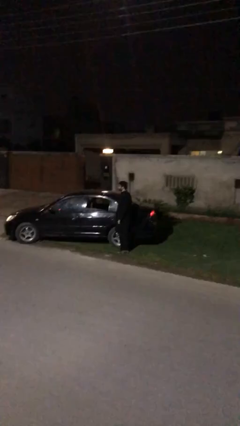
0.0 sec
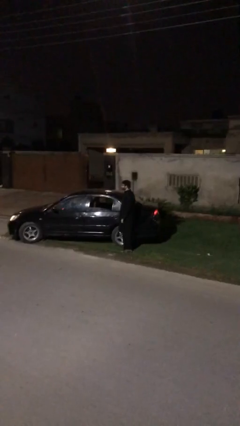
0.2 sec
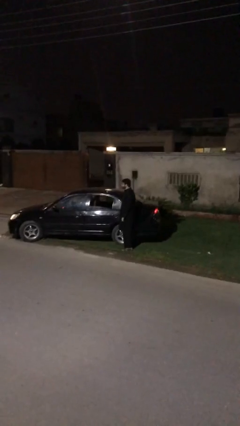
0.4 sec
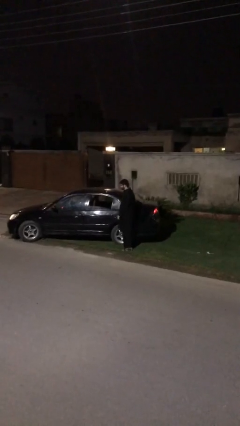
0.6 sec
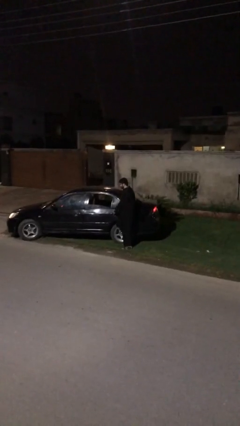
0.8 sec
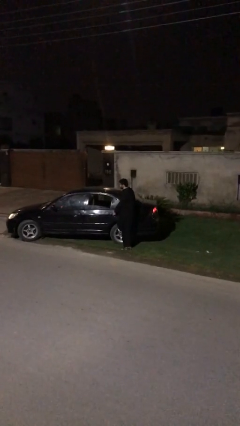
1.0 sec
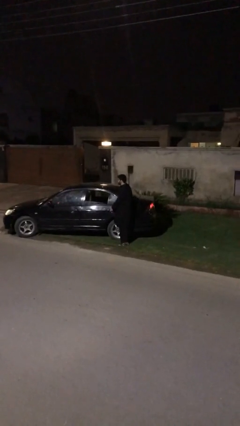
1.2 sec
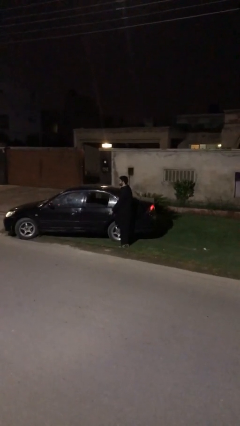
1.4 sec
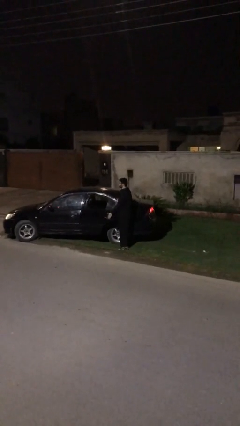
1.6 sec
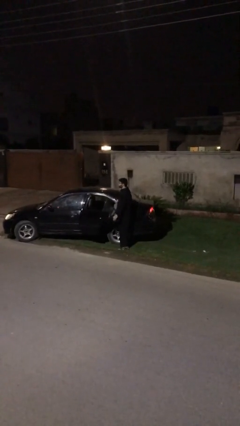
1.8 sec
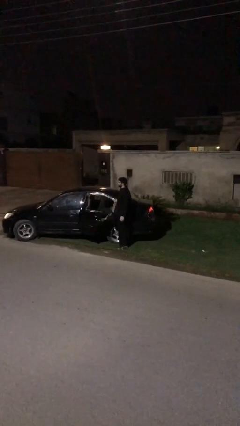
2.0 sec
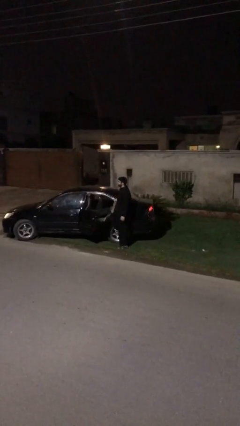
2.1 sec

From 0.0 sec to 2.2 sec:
person opens car door

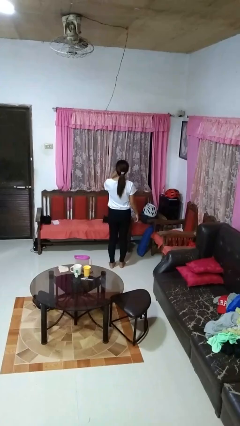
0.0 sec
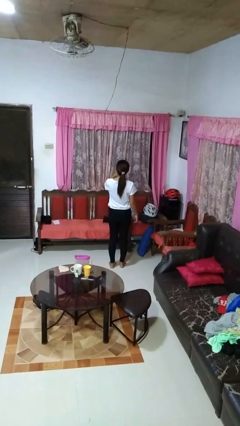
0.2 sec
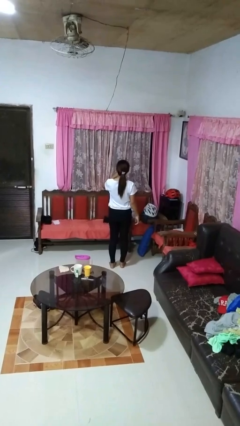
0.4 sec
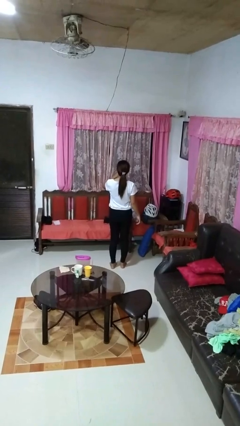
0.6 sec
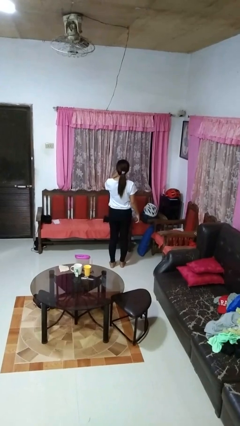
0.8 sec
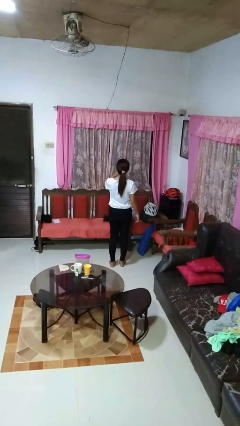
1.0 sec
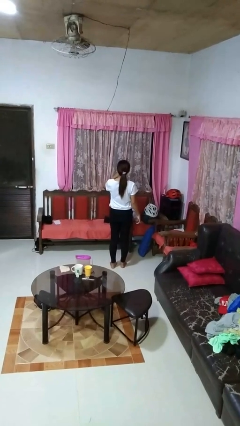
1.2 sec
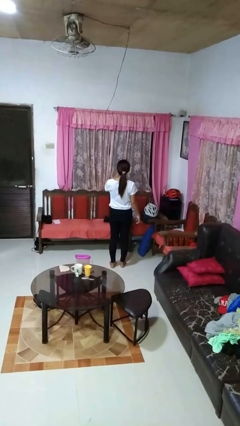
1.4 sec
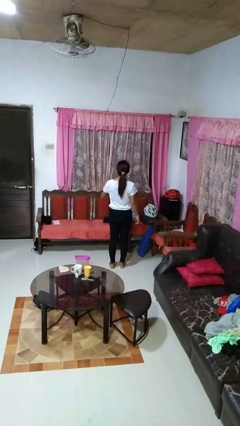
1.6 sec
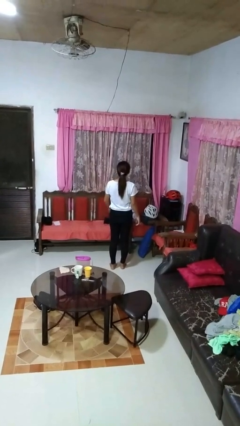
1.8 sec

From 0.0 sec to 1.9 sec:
person gestures be quiet

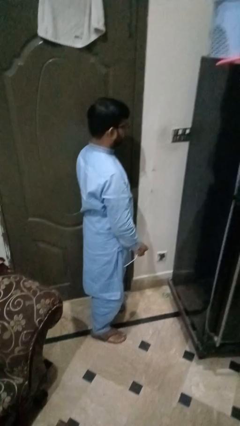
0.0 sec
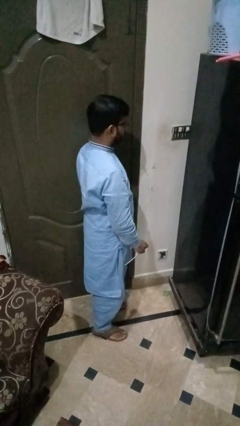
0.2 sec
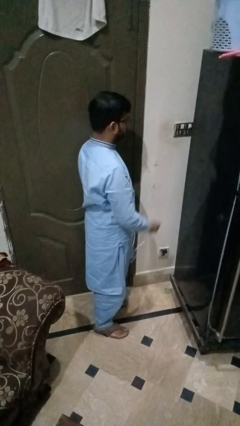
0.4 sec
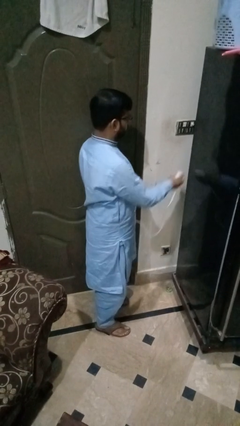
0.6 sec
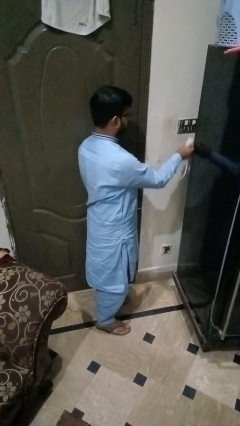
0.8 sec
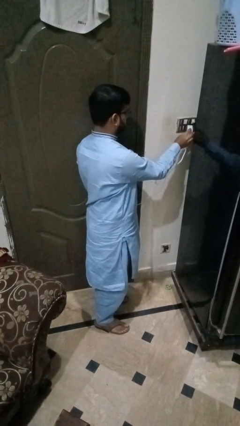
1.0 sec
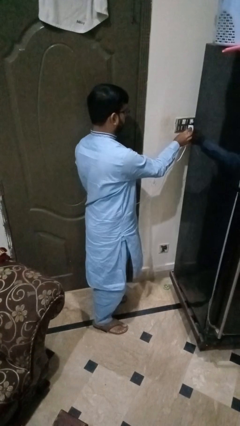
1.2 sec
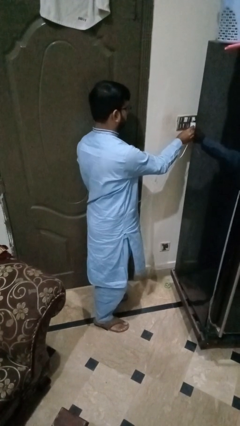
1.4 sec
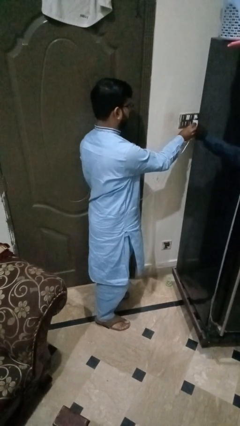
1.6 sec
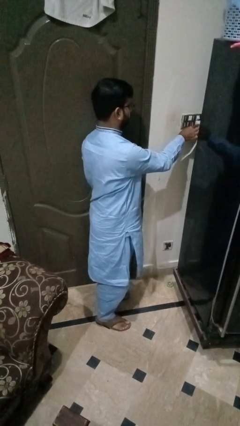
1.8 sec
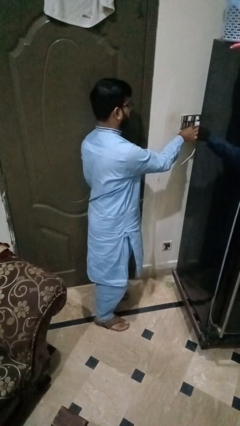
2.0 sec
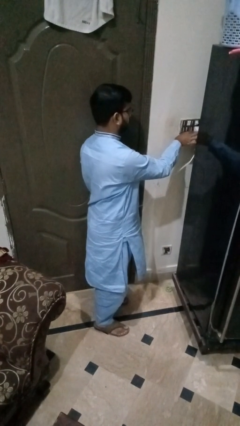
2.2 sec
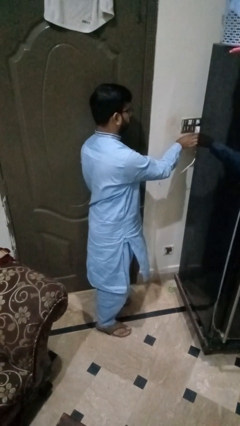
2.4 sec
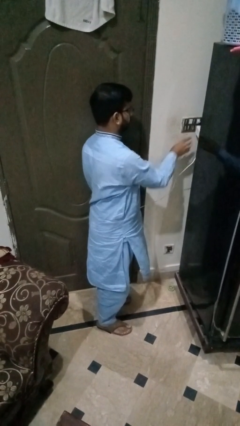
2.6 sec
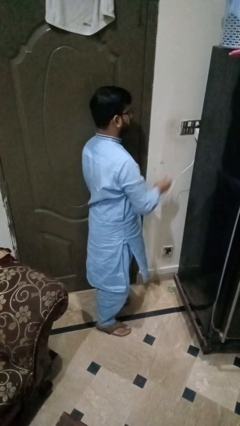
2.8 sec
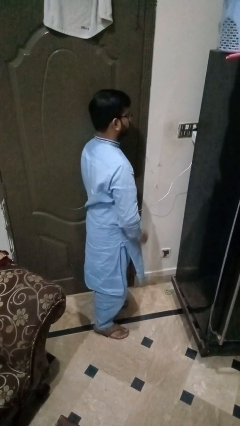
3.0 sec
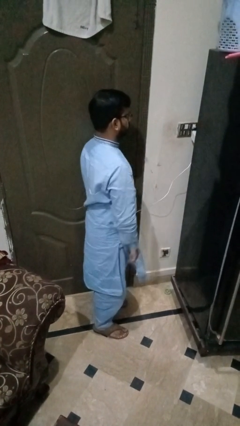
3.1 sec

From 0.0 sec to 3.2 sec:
person plugs into electrical socket

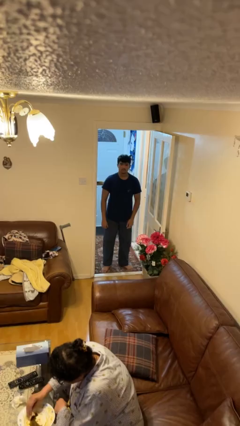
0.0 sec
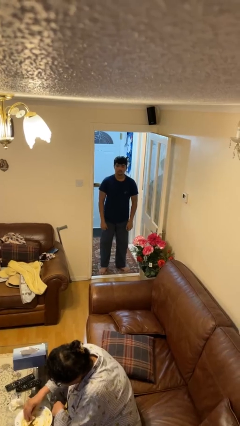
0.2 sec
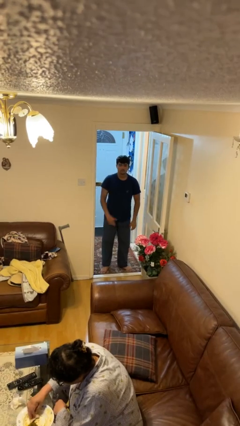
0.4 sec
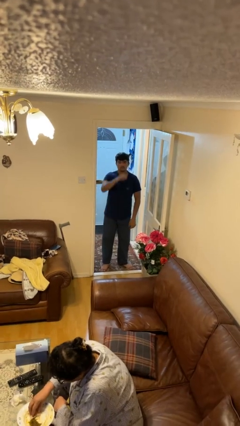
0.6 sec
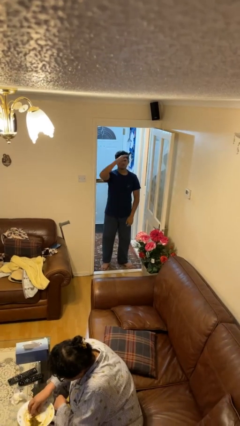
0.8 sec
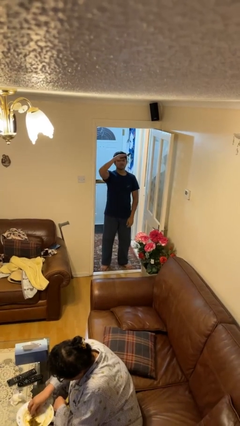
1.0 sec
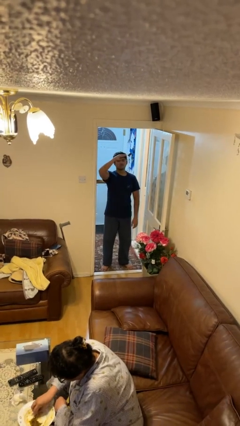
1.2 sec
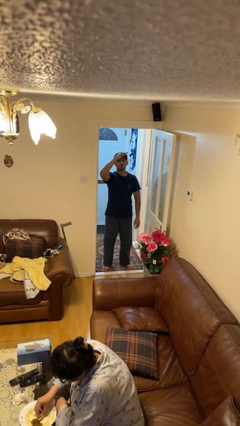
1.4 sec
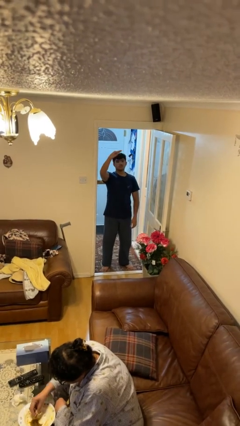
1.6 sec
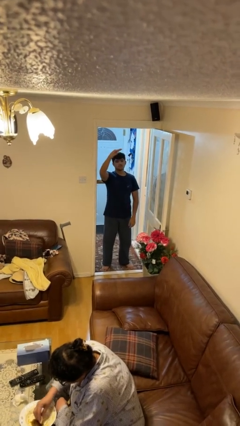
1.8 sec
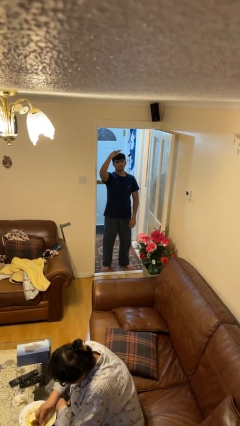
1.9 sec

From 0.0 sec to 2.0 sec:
person salutes

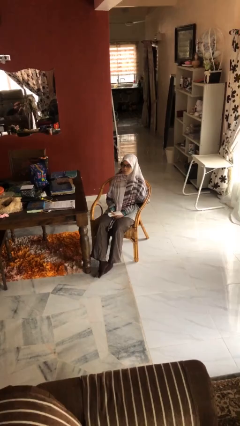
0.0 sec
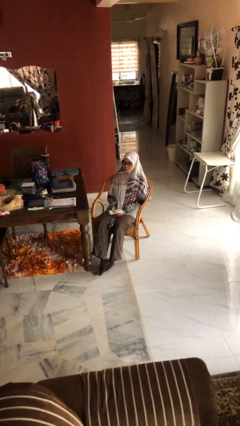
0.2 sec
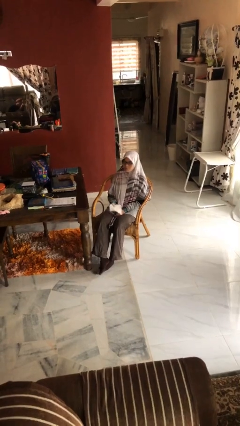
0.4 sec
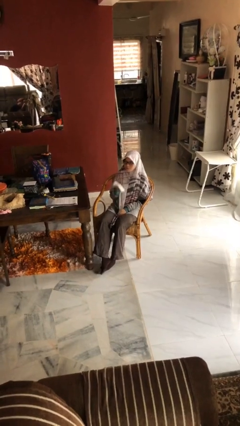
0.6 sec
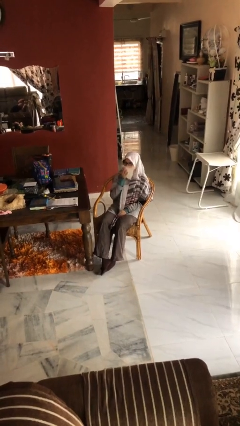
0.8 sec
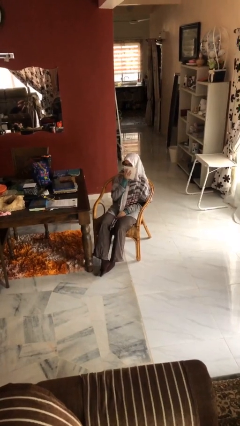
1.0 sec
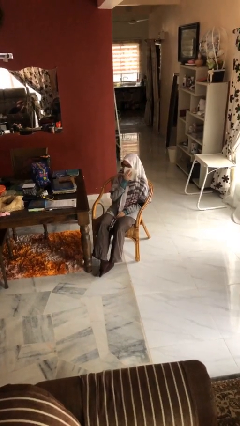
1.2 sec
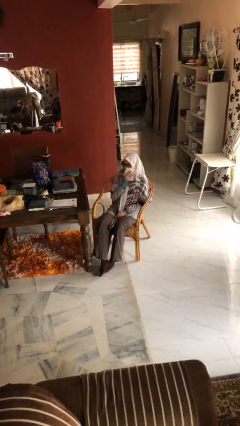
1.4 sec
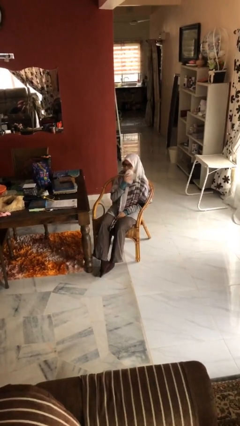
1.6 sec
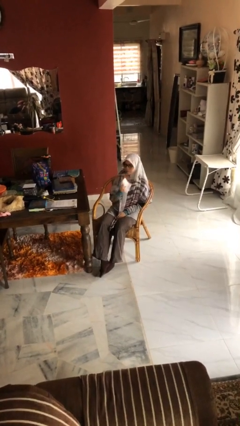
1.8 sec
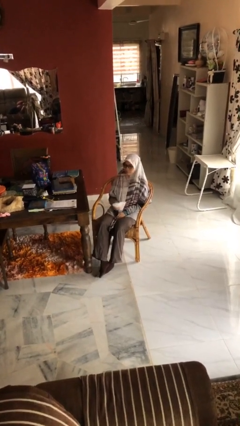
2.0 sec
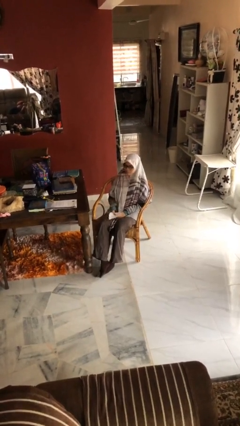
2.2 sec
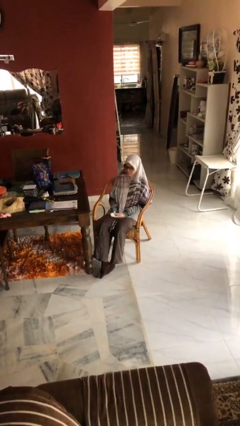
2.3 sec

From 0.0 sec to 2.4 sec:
person wipes mouth with napkin

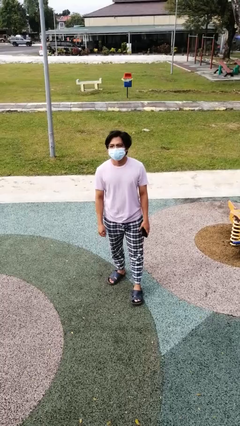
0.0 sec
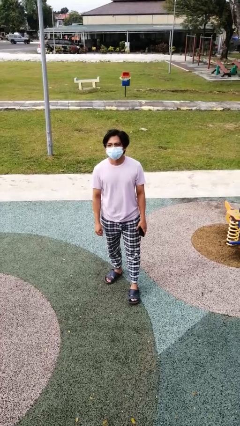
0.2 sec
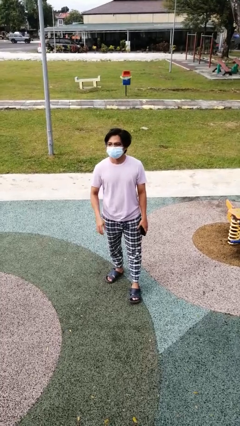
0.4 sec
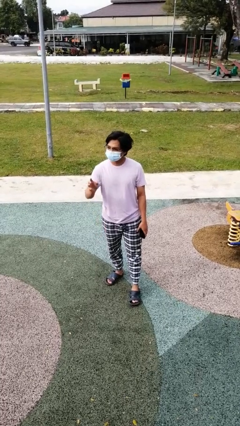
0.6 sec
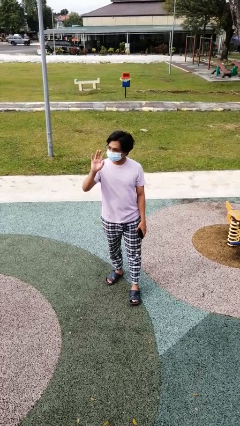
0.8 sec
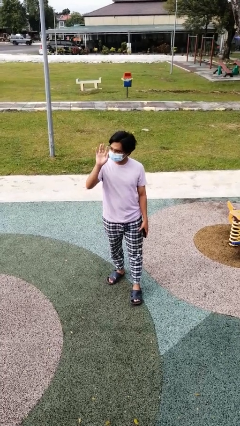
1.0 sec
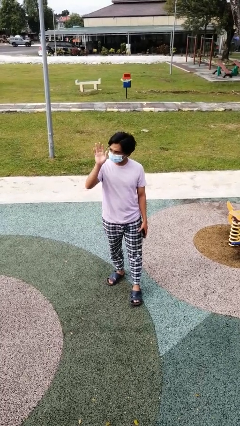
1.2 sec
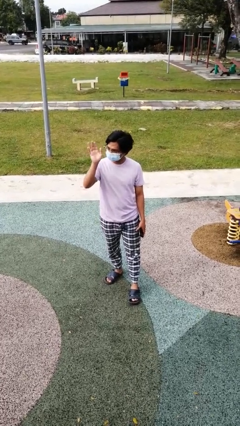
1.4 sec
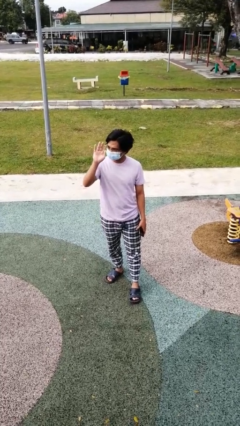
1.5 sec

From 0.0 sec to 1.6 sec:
person waves at person

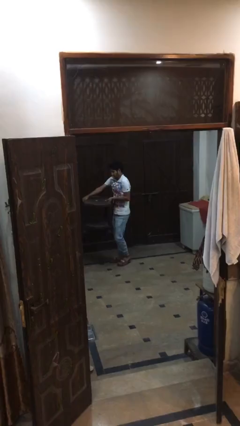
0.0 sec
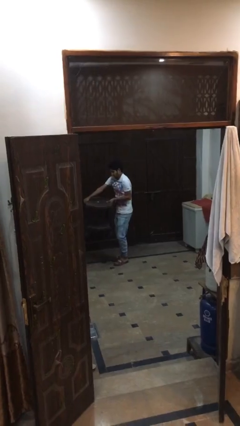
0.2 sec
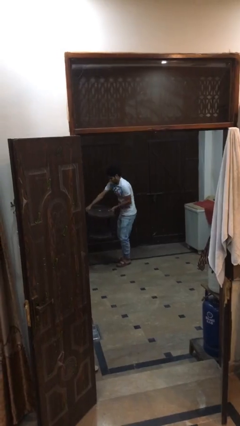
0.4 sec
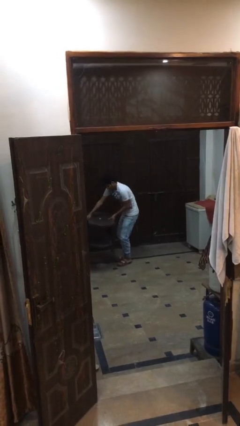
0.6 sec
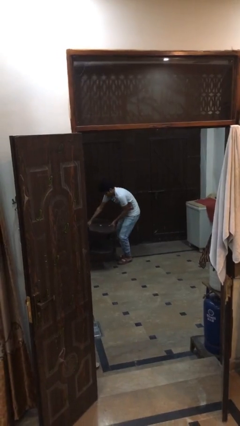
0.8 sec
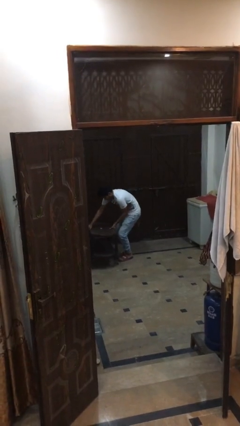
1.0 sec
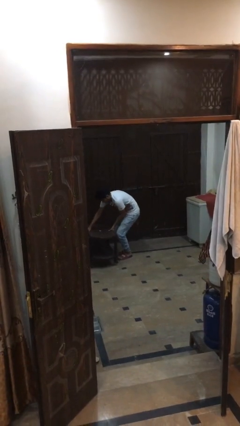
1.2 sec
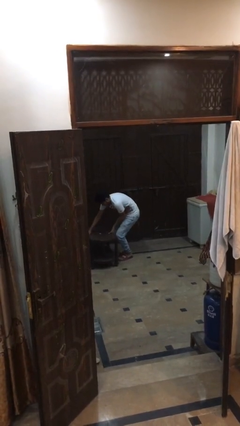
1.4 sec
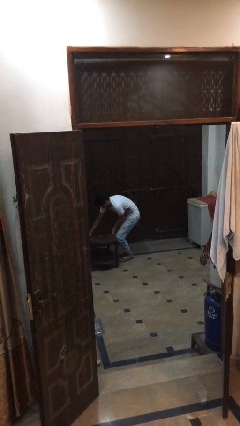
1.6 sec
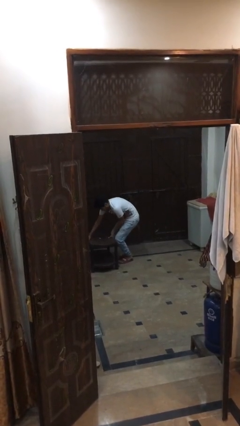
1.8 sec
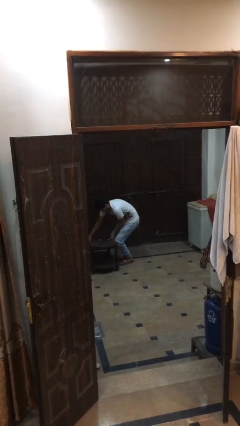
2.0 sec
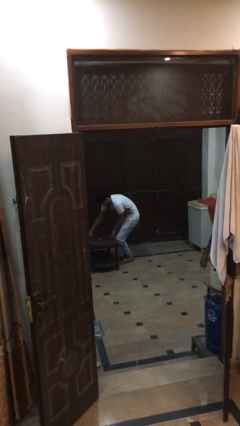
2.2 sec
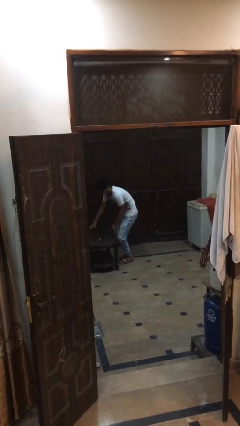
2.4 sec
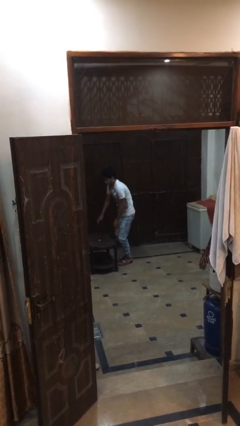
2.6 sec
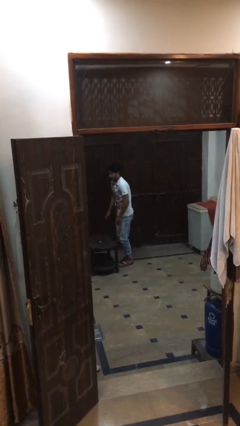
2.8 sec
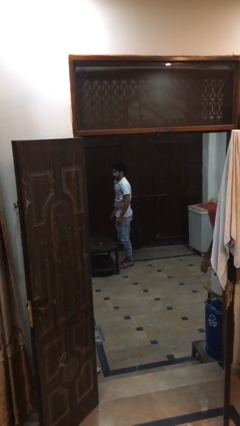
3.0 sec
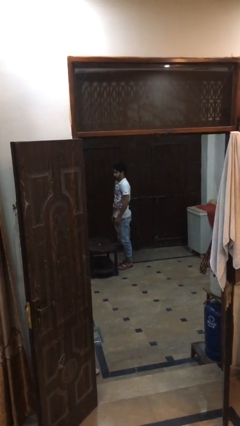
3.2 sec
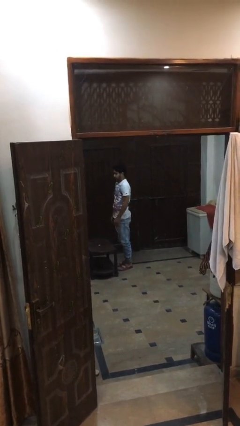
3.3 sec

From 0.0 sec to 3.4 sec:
person puts down object on floor

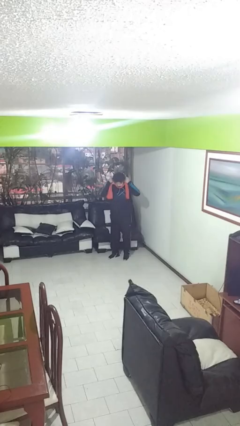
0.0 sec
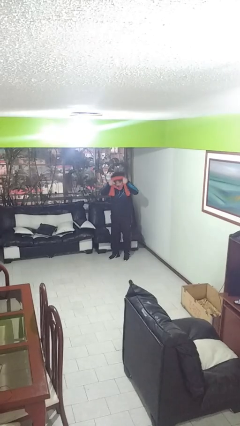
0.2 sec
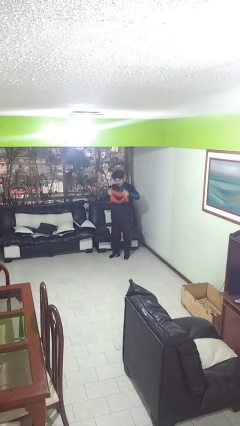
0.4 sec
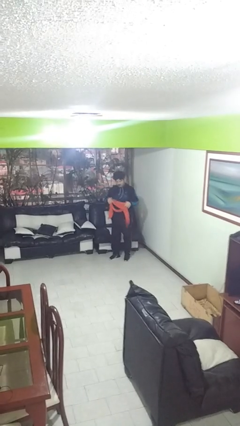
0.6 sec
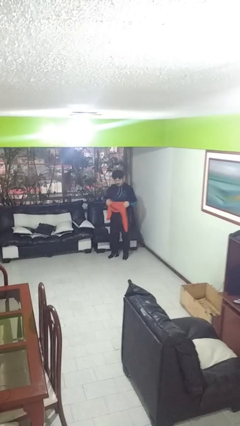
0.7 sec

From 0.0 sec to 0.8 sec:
person takes off scarf
